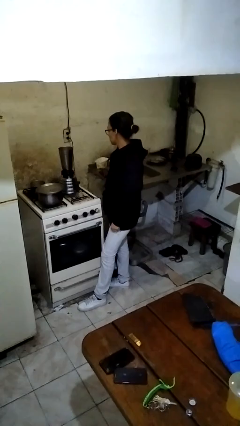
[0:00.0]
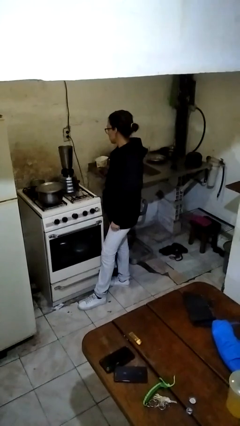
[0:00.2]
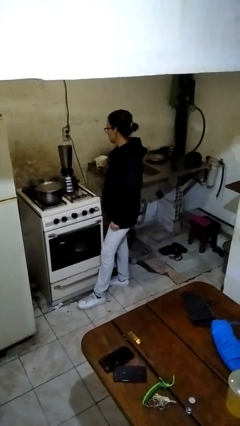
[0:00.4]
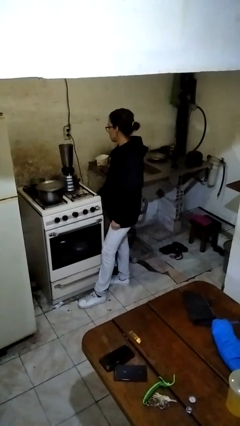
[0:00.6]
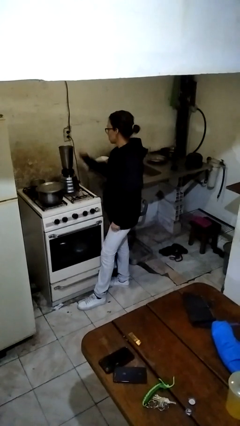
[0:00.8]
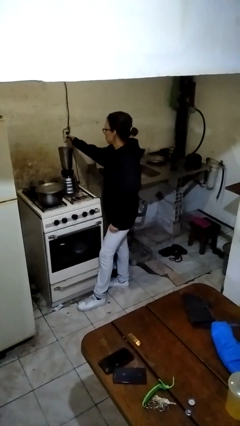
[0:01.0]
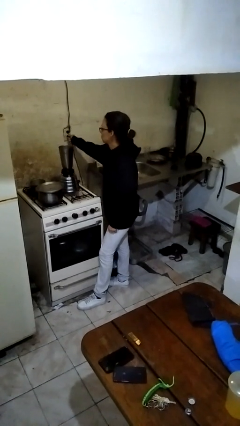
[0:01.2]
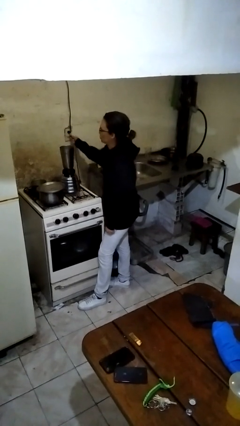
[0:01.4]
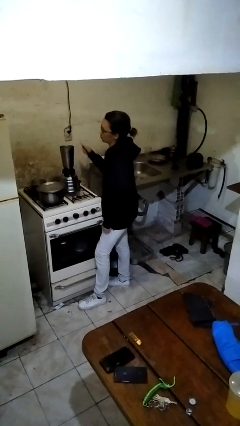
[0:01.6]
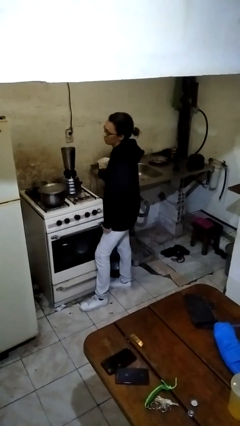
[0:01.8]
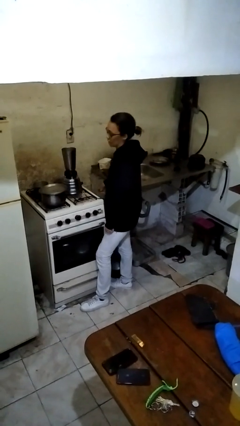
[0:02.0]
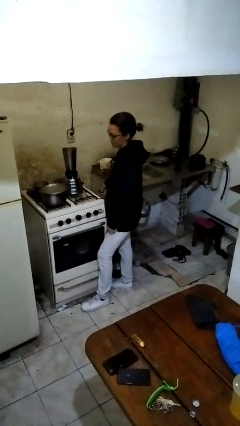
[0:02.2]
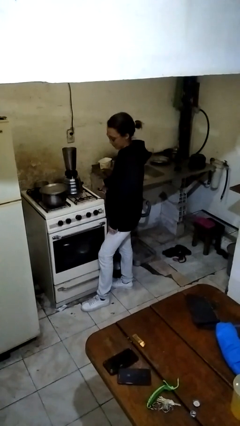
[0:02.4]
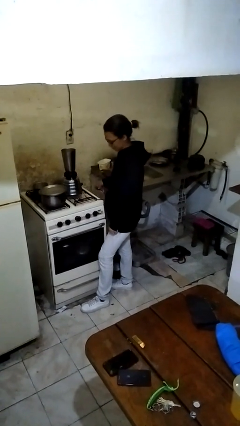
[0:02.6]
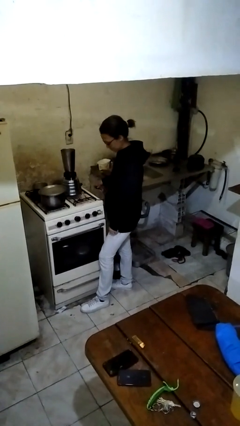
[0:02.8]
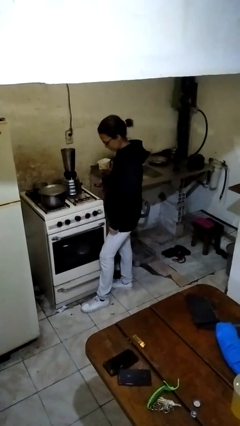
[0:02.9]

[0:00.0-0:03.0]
person unplugs from electrical socket

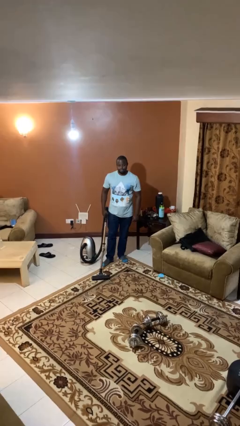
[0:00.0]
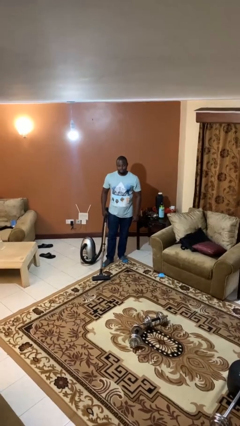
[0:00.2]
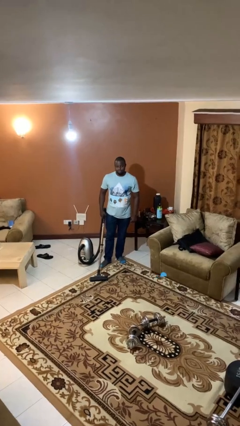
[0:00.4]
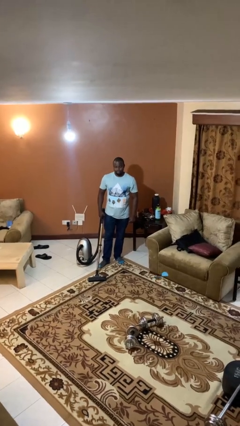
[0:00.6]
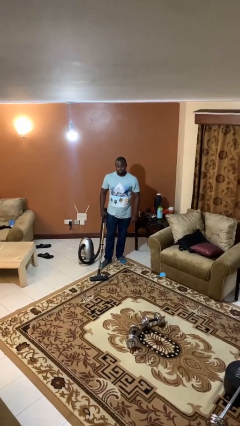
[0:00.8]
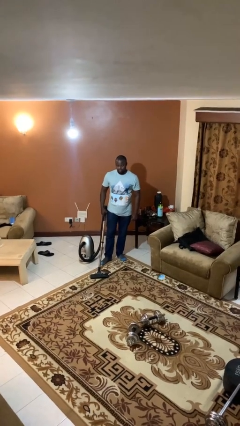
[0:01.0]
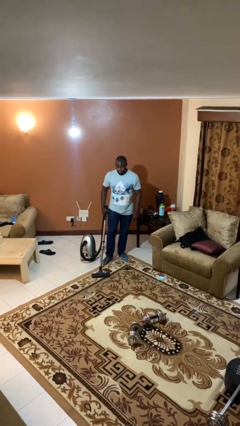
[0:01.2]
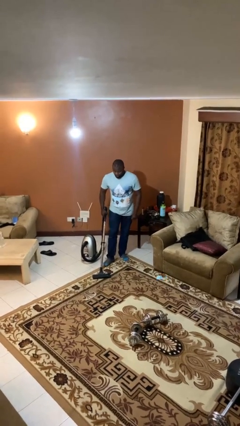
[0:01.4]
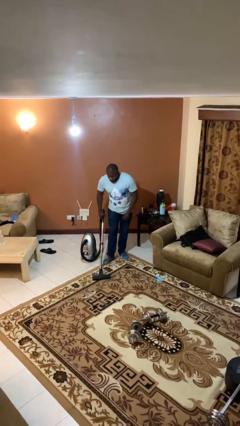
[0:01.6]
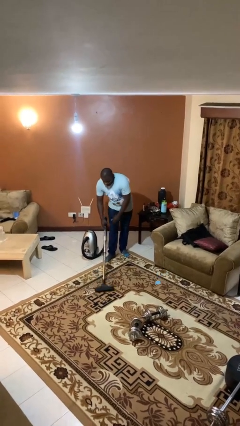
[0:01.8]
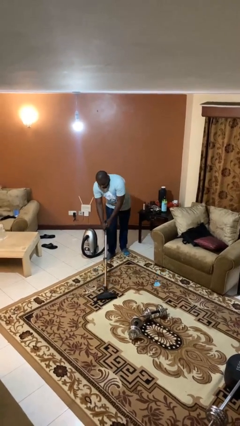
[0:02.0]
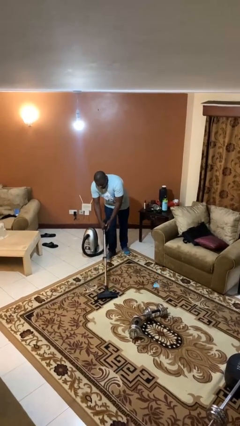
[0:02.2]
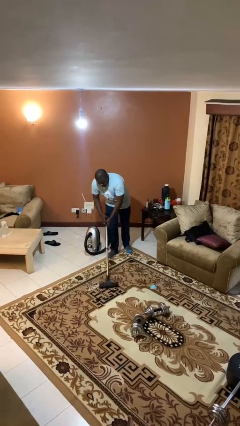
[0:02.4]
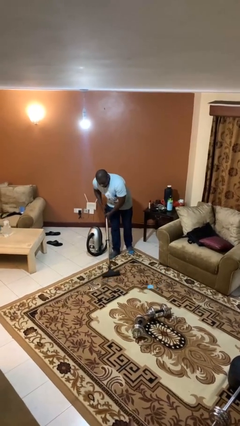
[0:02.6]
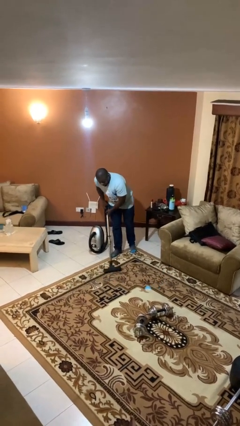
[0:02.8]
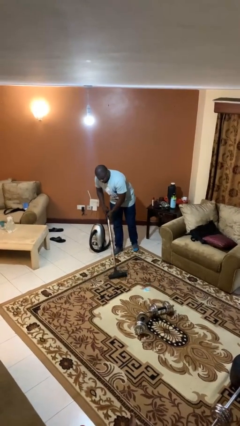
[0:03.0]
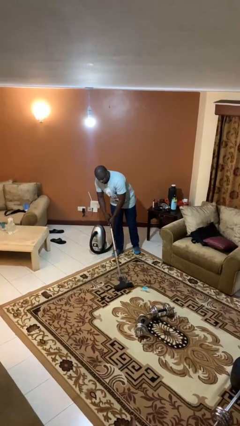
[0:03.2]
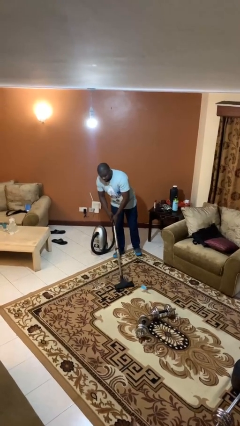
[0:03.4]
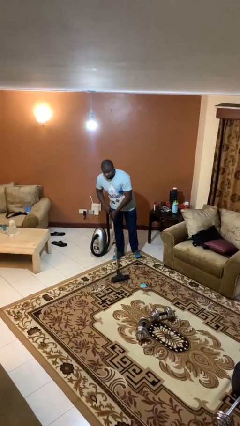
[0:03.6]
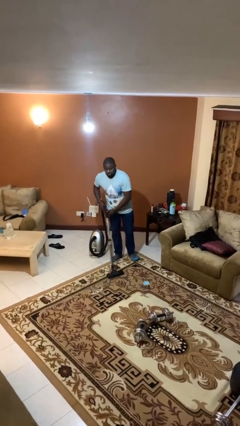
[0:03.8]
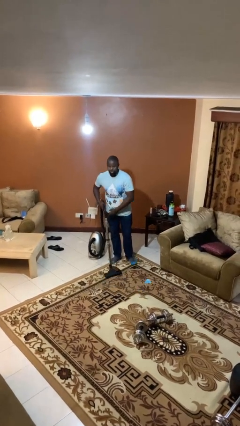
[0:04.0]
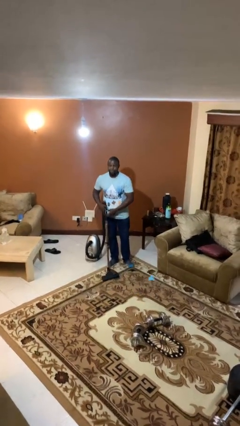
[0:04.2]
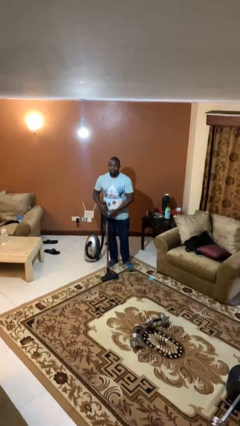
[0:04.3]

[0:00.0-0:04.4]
person vacuums carpet

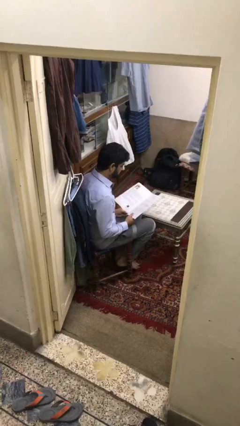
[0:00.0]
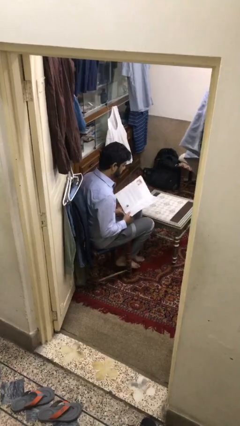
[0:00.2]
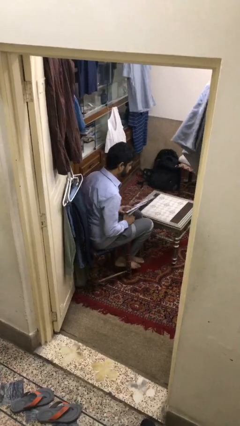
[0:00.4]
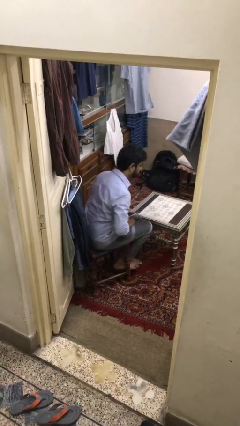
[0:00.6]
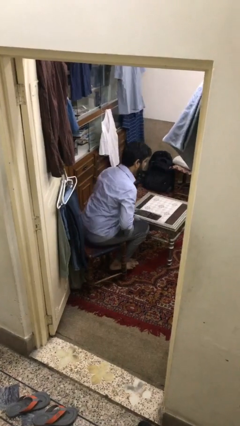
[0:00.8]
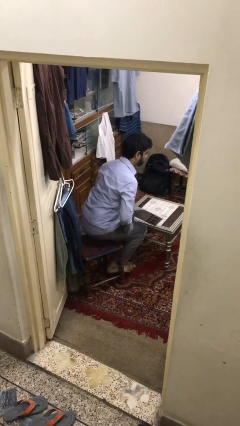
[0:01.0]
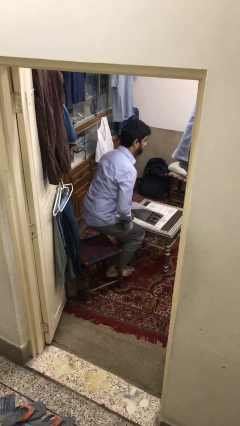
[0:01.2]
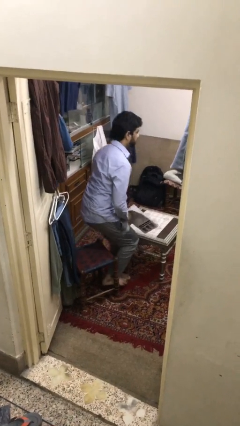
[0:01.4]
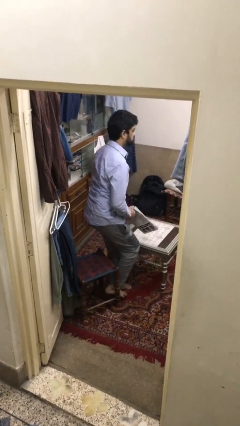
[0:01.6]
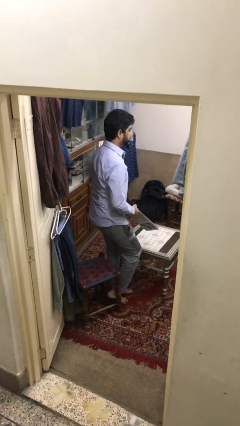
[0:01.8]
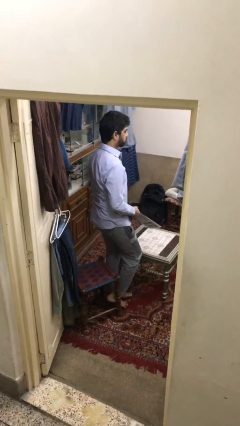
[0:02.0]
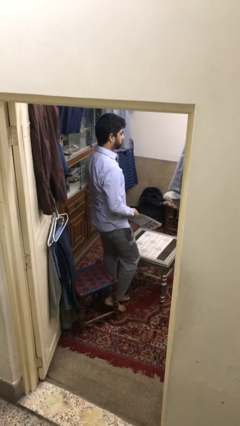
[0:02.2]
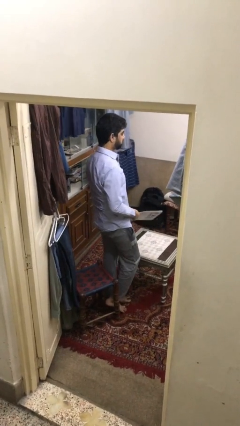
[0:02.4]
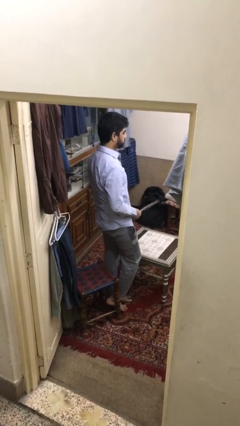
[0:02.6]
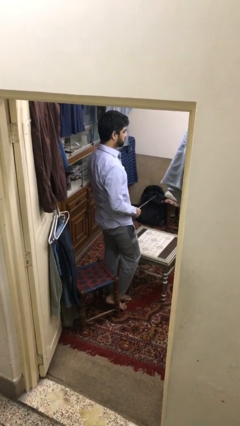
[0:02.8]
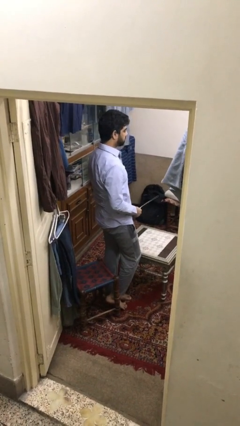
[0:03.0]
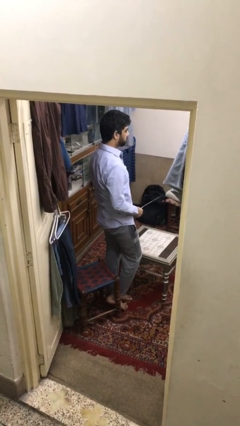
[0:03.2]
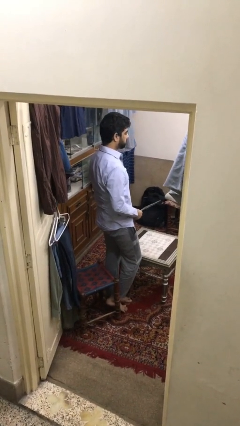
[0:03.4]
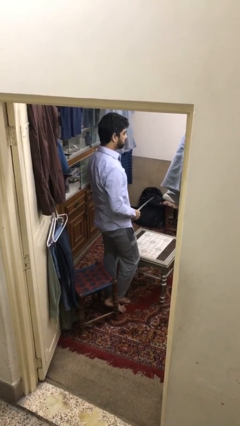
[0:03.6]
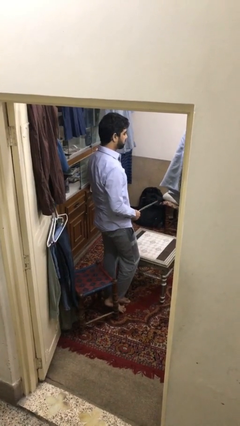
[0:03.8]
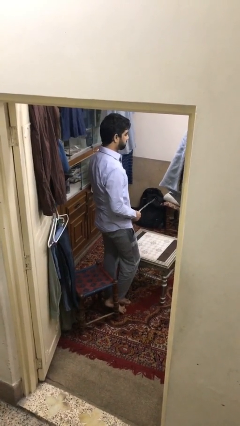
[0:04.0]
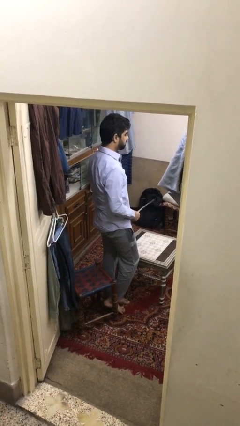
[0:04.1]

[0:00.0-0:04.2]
person stands up

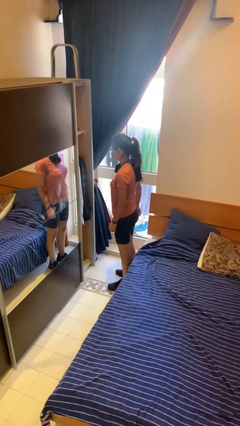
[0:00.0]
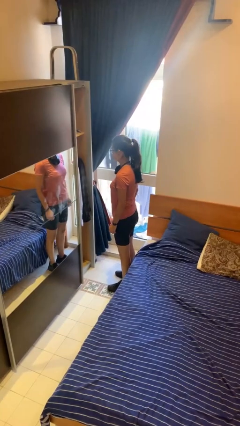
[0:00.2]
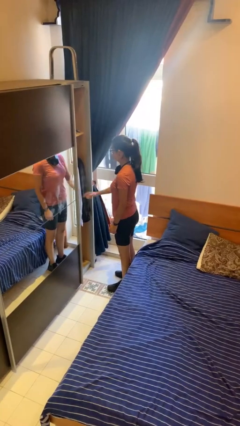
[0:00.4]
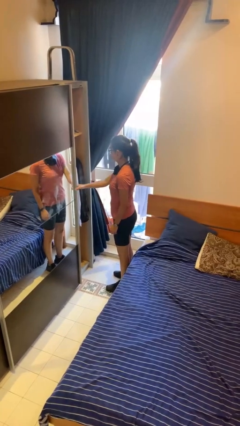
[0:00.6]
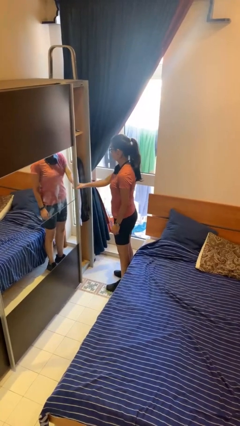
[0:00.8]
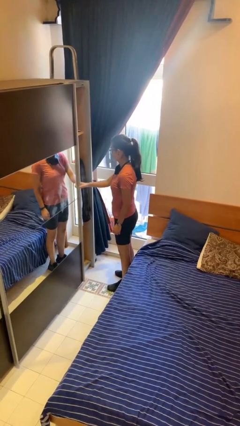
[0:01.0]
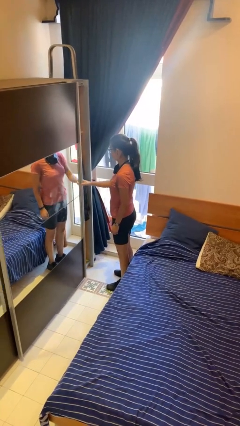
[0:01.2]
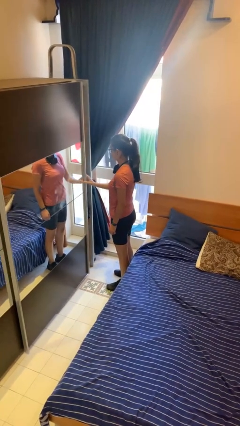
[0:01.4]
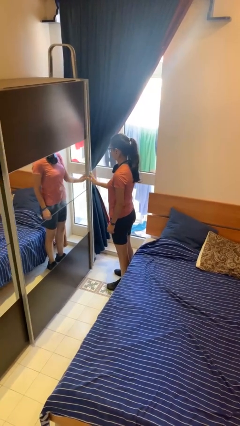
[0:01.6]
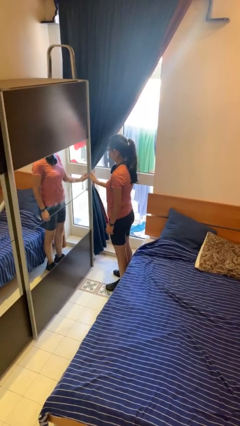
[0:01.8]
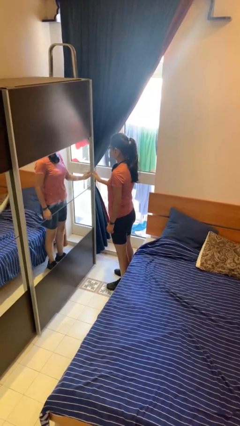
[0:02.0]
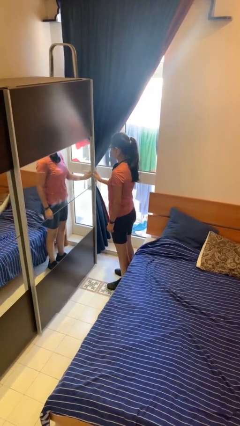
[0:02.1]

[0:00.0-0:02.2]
person closes closet door

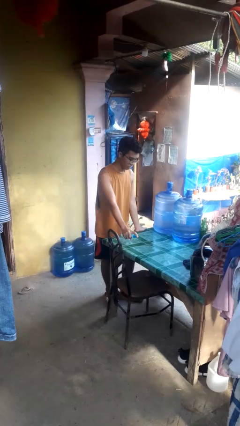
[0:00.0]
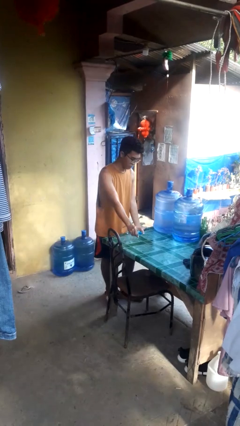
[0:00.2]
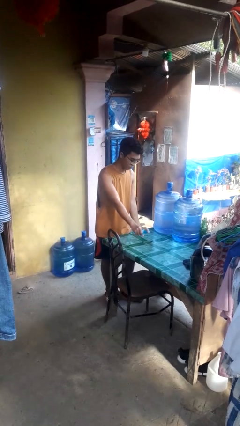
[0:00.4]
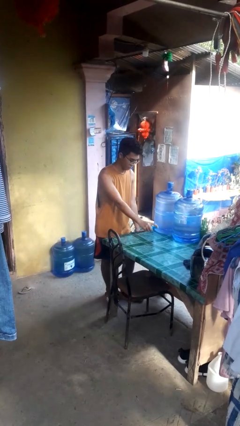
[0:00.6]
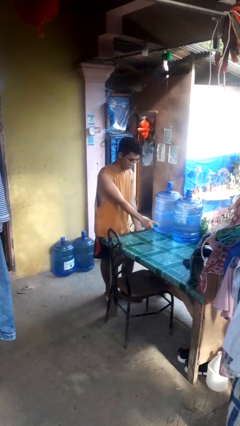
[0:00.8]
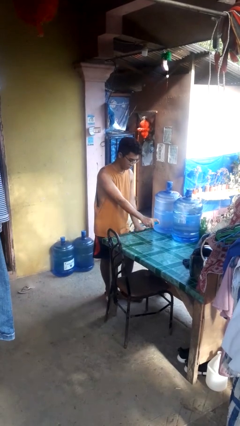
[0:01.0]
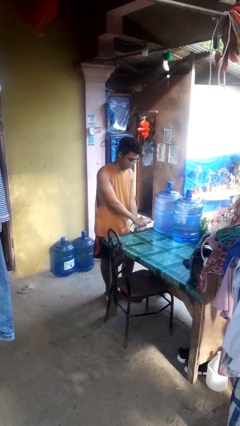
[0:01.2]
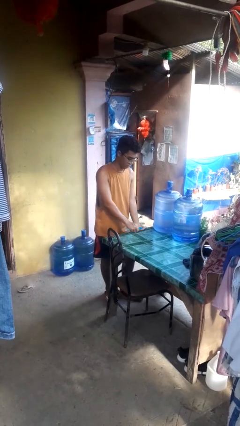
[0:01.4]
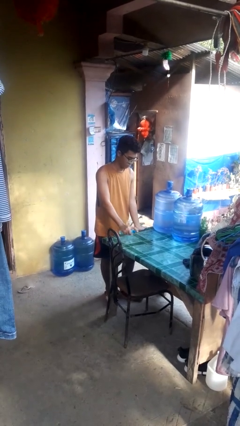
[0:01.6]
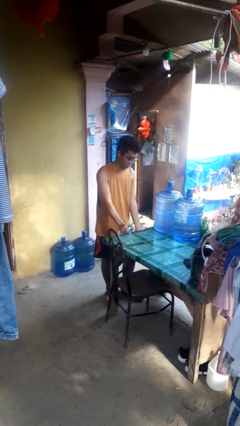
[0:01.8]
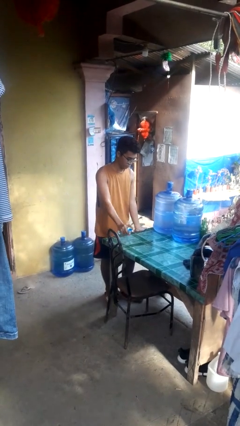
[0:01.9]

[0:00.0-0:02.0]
person sprays from bottle

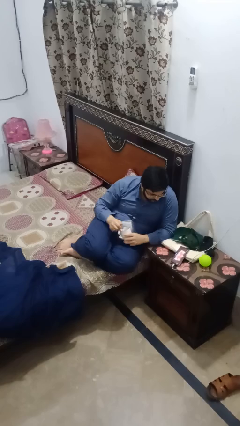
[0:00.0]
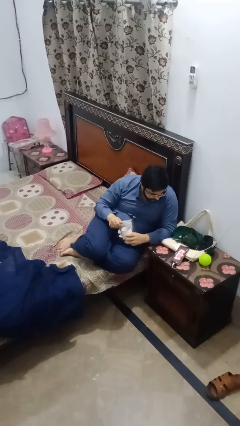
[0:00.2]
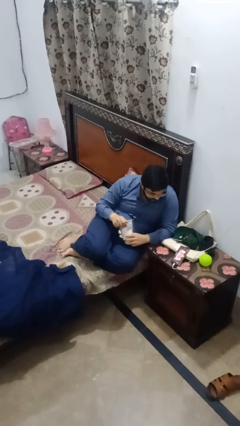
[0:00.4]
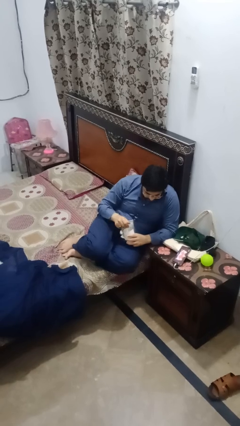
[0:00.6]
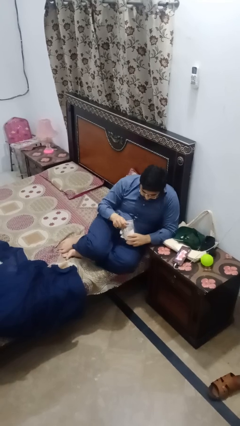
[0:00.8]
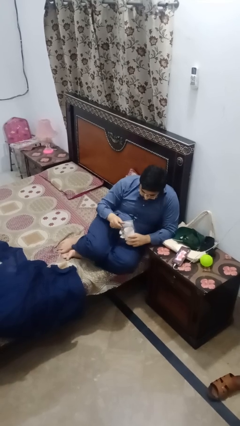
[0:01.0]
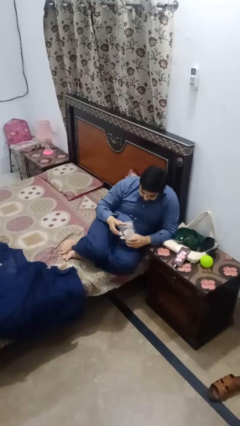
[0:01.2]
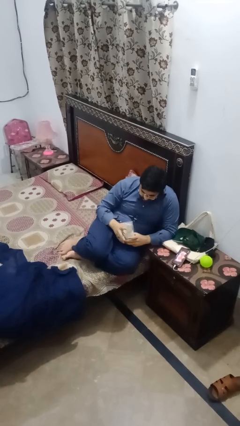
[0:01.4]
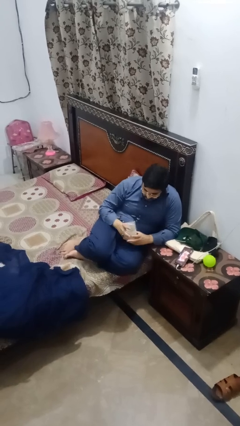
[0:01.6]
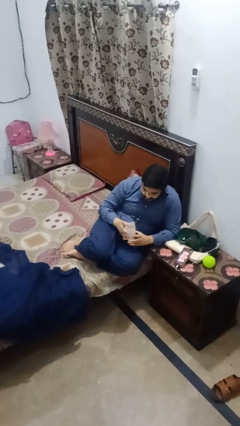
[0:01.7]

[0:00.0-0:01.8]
person stirs mug

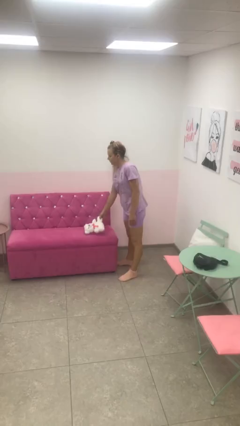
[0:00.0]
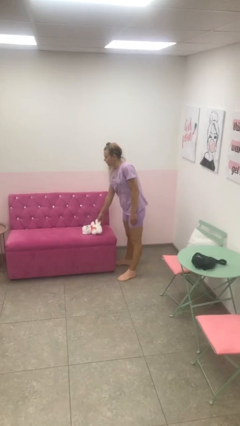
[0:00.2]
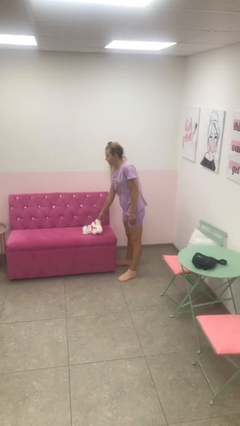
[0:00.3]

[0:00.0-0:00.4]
person puts down object on couch
